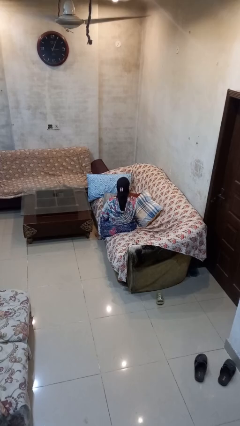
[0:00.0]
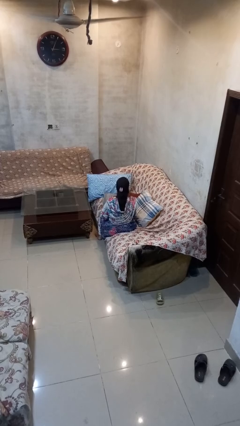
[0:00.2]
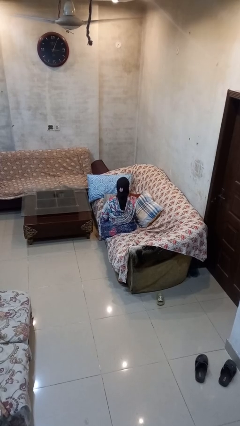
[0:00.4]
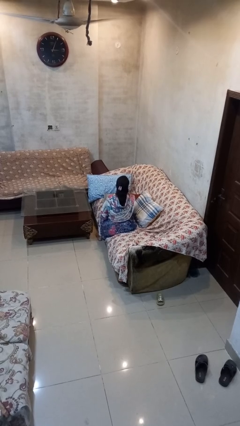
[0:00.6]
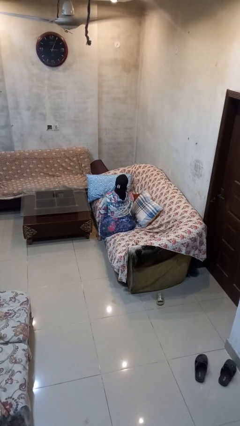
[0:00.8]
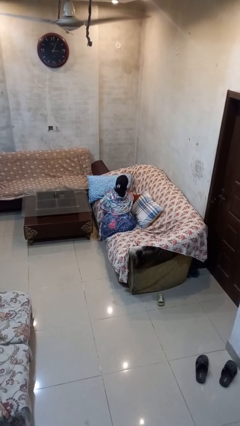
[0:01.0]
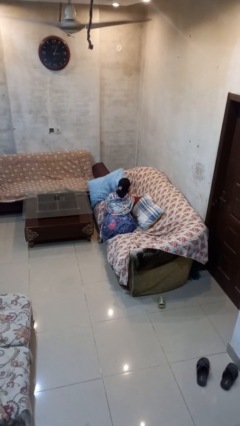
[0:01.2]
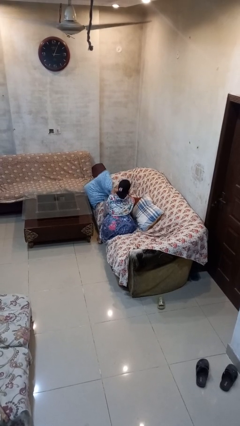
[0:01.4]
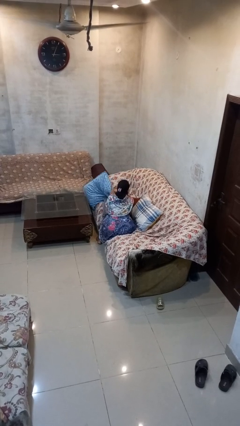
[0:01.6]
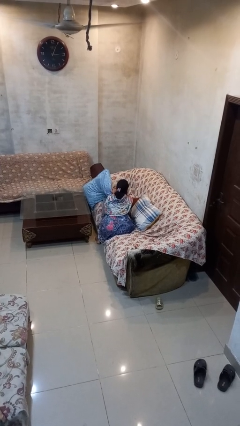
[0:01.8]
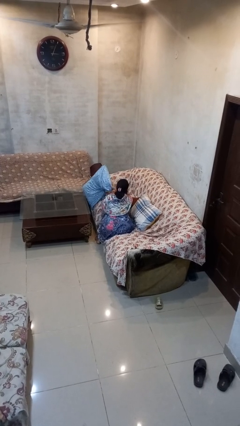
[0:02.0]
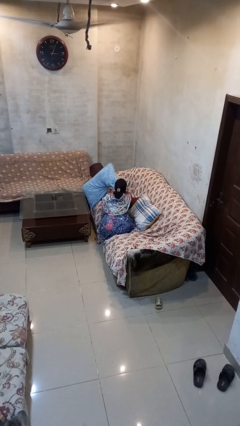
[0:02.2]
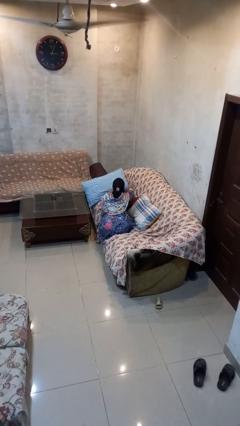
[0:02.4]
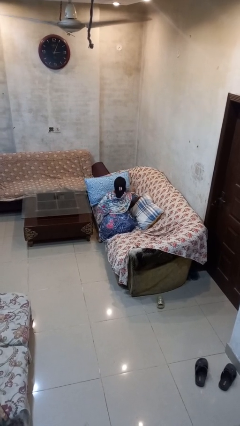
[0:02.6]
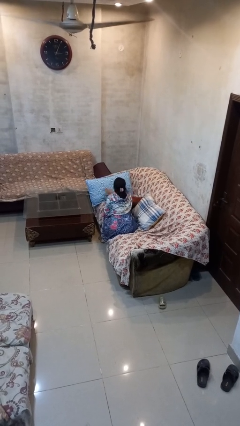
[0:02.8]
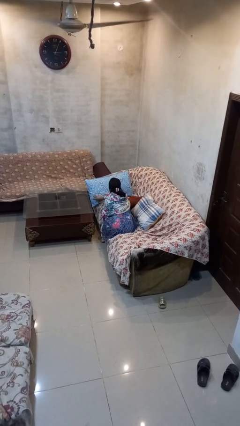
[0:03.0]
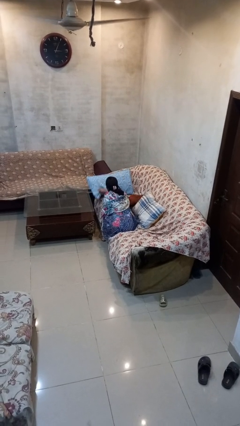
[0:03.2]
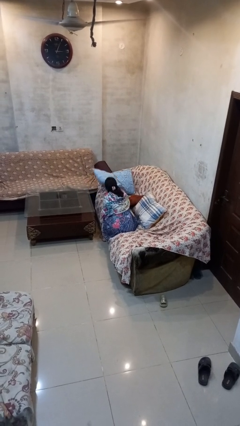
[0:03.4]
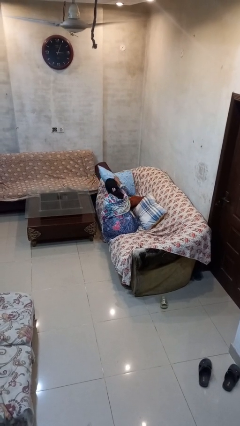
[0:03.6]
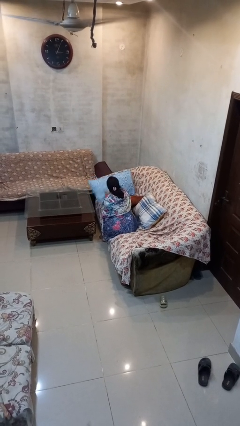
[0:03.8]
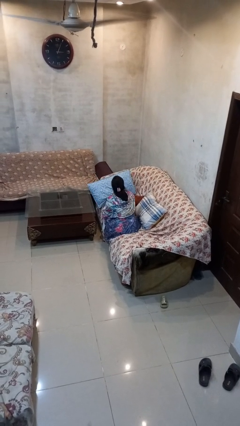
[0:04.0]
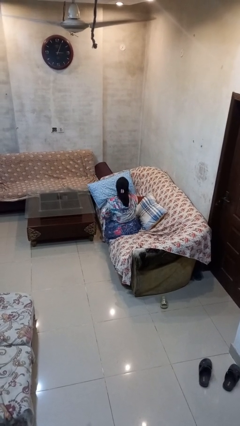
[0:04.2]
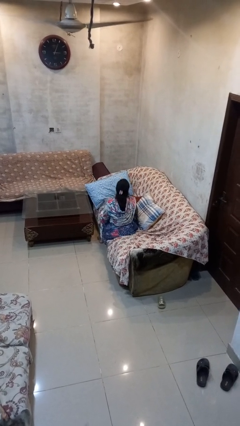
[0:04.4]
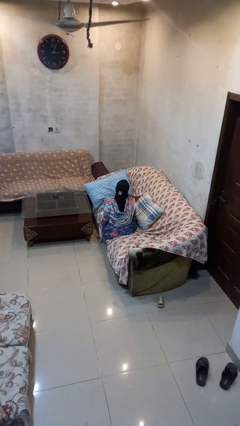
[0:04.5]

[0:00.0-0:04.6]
person searches in couch

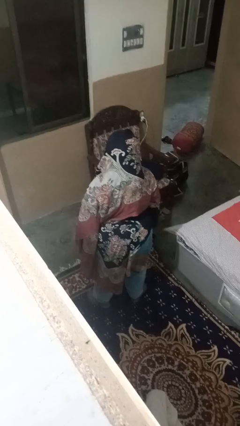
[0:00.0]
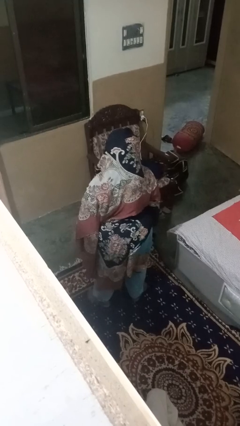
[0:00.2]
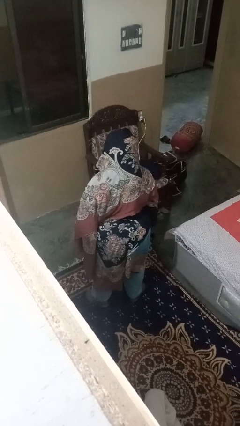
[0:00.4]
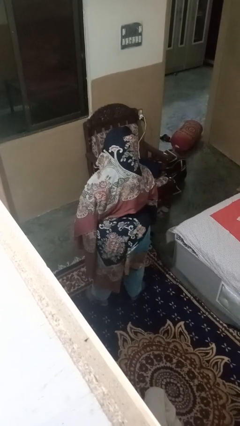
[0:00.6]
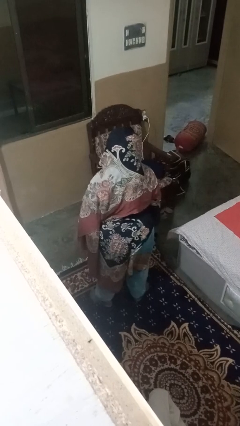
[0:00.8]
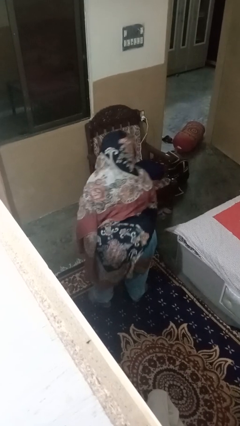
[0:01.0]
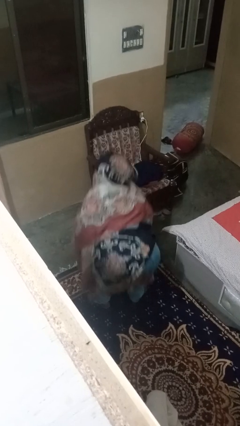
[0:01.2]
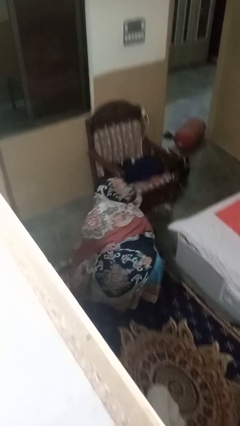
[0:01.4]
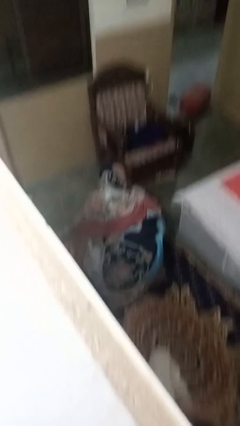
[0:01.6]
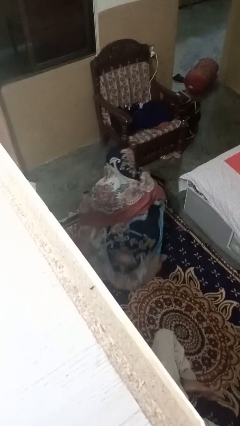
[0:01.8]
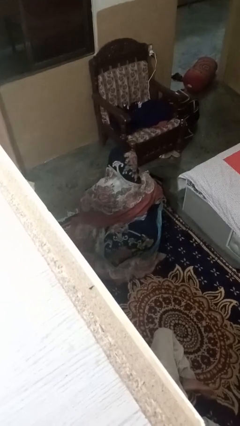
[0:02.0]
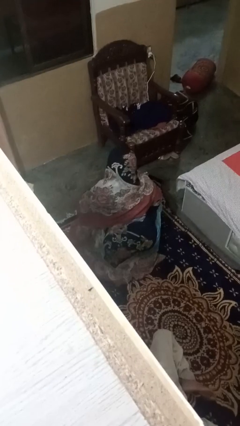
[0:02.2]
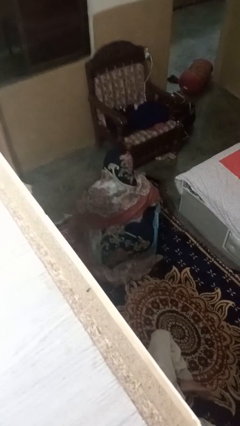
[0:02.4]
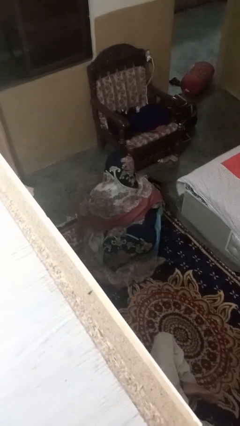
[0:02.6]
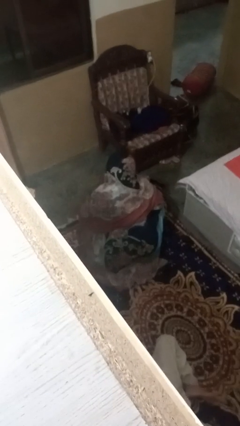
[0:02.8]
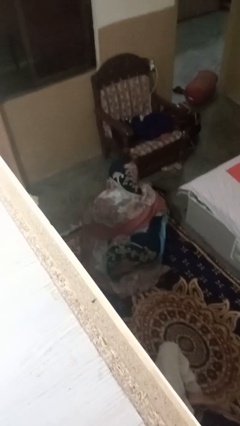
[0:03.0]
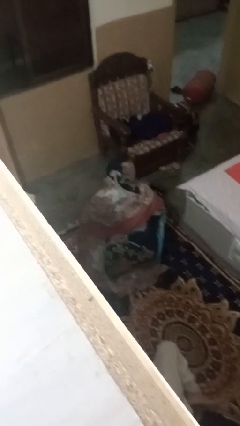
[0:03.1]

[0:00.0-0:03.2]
person squats

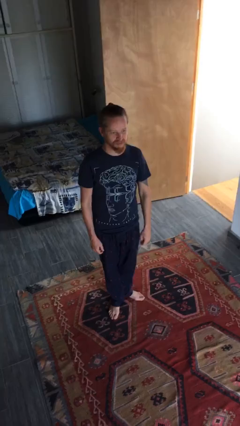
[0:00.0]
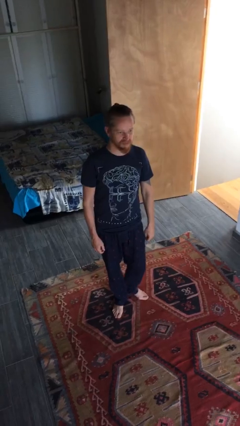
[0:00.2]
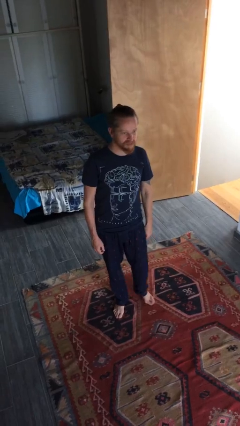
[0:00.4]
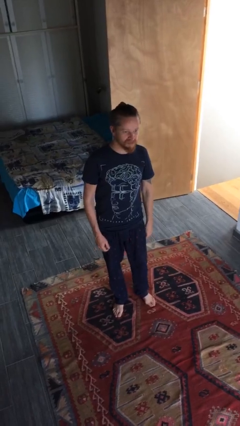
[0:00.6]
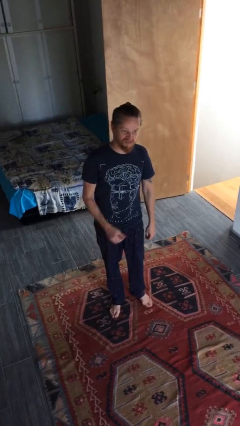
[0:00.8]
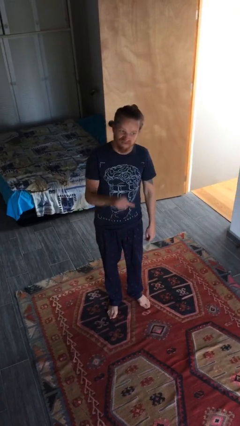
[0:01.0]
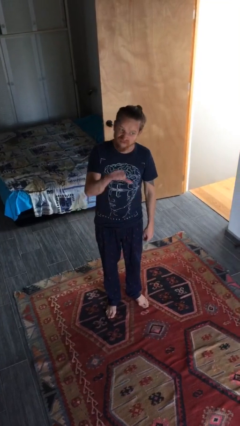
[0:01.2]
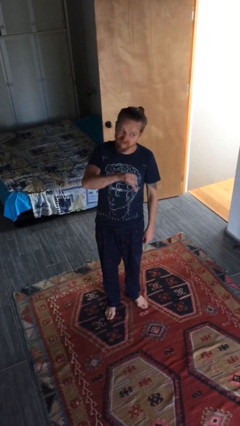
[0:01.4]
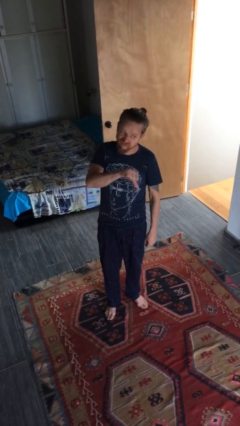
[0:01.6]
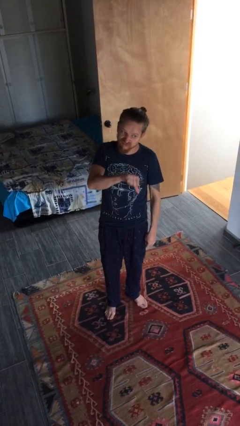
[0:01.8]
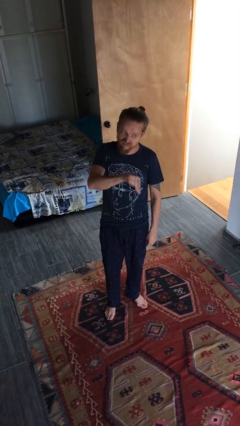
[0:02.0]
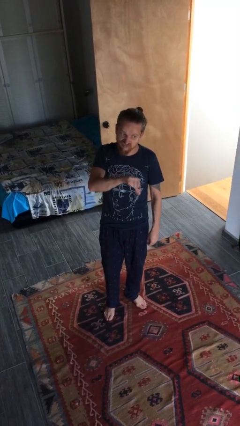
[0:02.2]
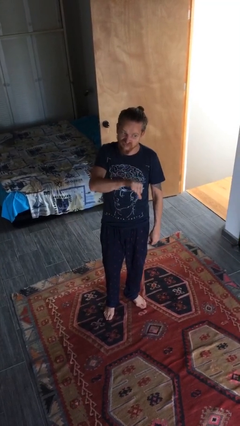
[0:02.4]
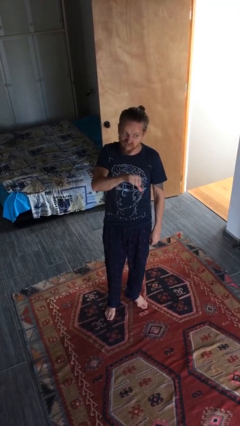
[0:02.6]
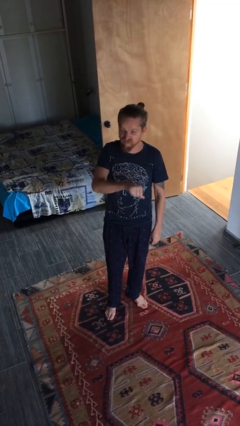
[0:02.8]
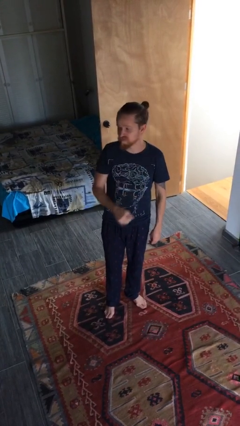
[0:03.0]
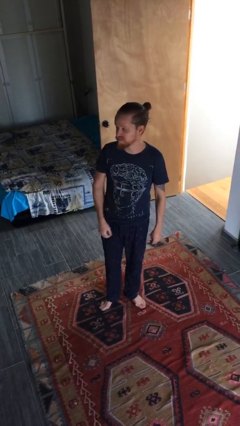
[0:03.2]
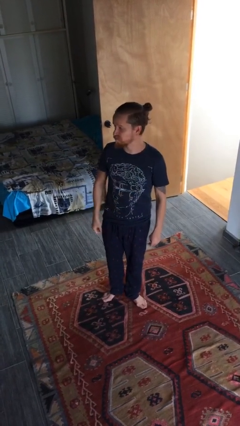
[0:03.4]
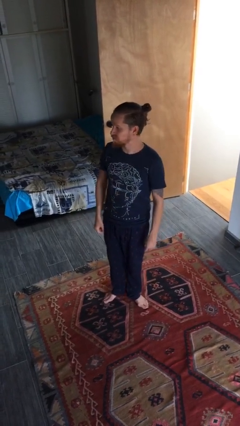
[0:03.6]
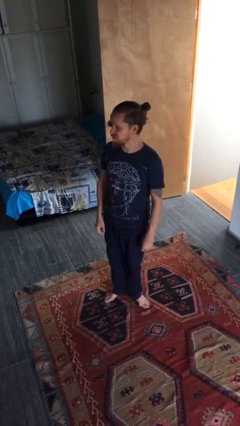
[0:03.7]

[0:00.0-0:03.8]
person gestures thumbs down

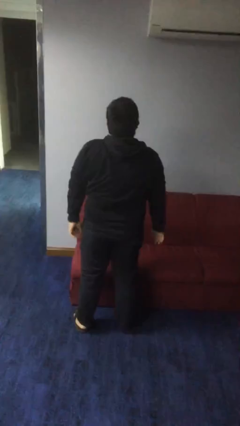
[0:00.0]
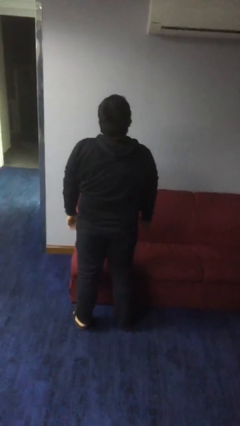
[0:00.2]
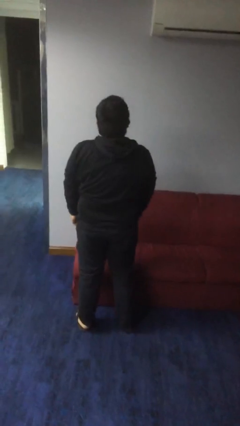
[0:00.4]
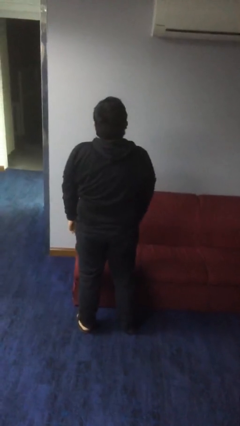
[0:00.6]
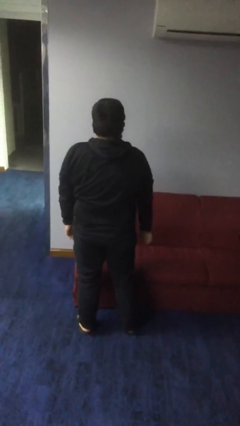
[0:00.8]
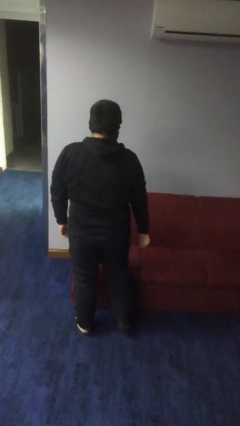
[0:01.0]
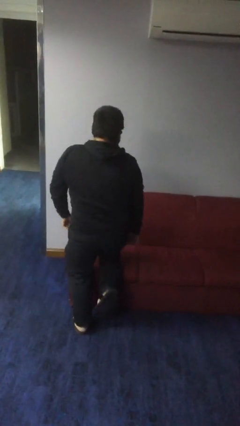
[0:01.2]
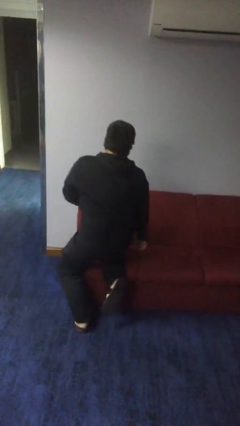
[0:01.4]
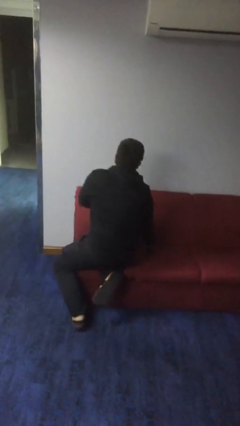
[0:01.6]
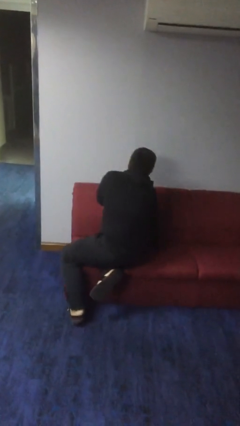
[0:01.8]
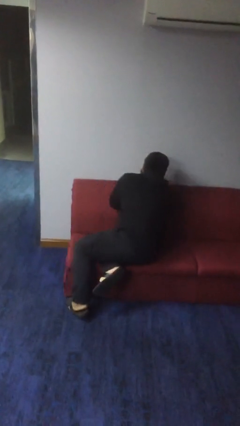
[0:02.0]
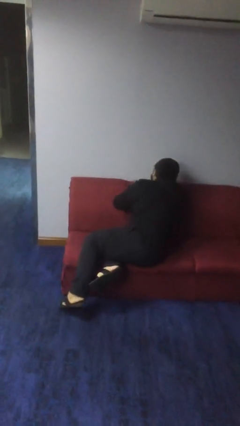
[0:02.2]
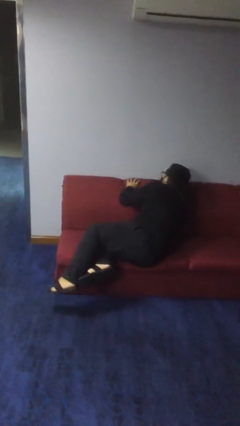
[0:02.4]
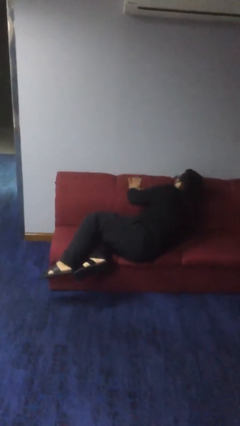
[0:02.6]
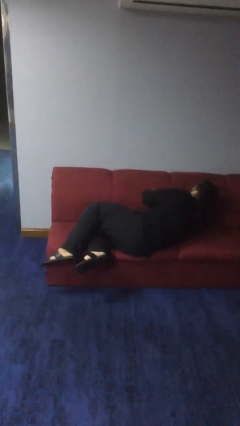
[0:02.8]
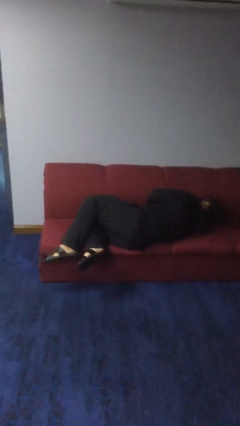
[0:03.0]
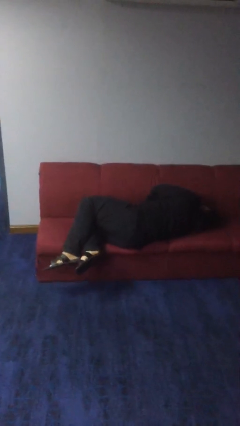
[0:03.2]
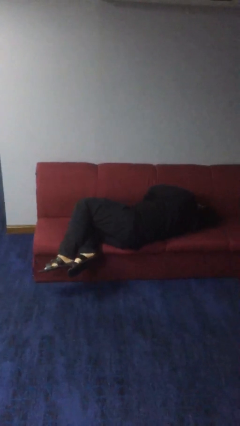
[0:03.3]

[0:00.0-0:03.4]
person lies down on couch

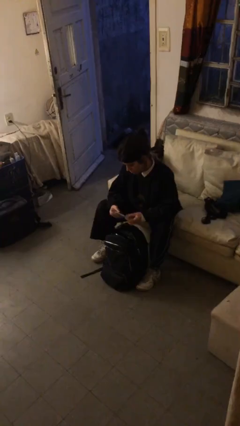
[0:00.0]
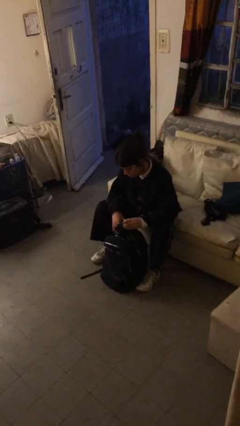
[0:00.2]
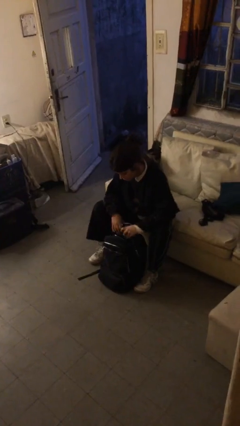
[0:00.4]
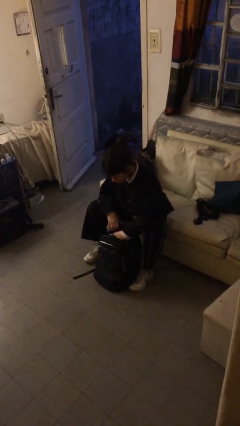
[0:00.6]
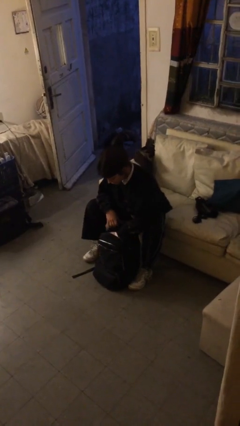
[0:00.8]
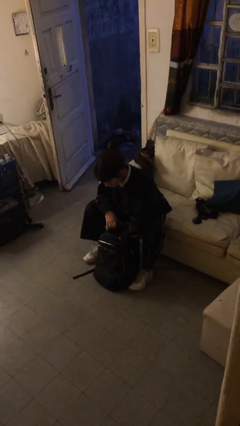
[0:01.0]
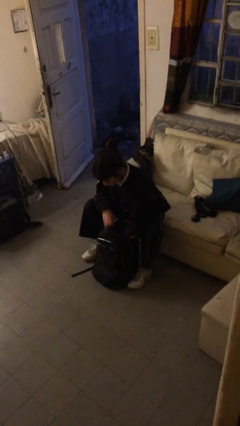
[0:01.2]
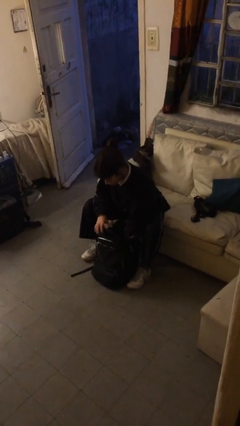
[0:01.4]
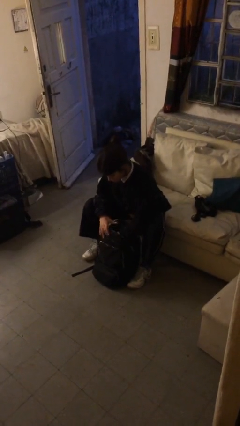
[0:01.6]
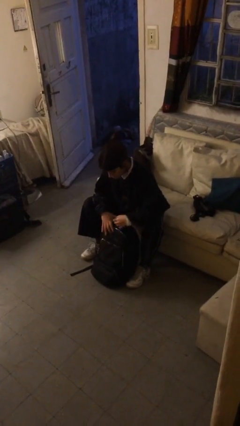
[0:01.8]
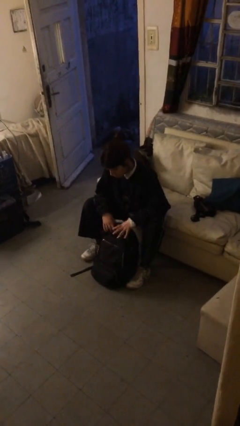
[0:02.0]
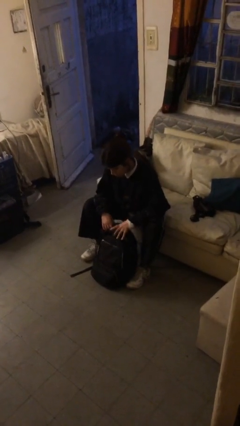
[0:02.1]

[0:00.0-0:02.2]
person puts object into backpack

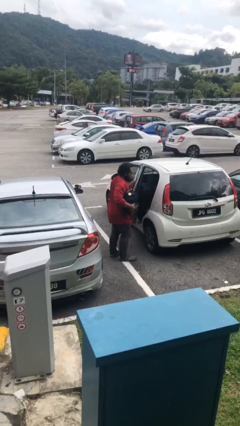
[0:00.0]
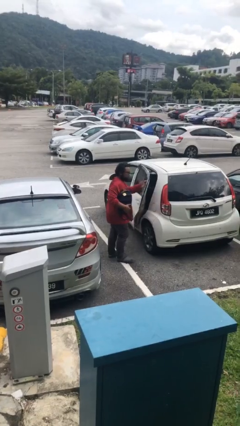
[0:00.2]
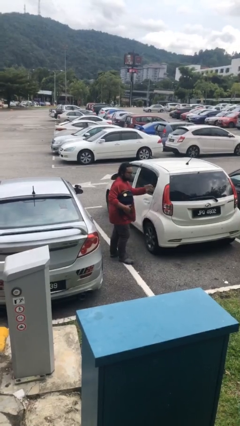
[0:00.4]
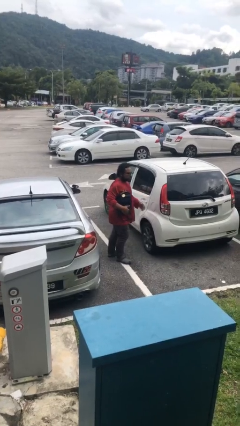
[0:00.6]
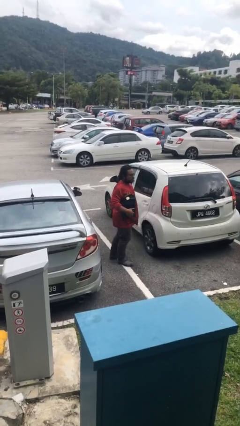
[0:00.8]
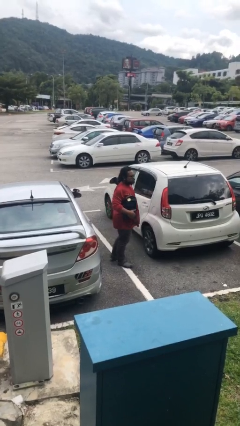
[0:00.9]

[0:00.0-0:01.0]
person closes car door
